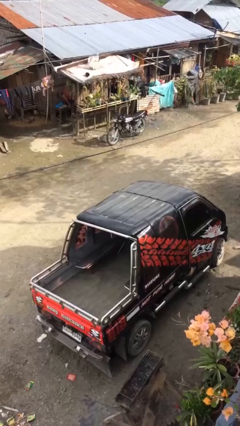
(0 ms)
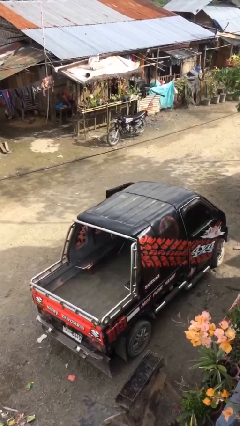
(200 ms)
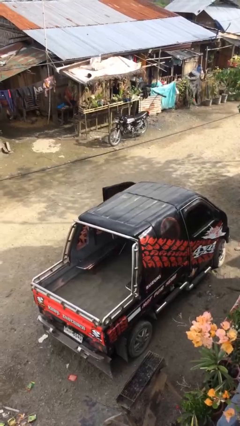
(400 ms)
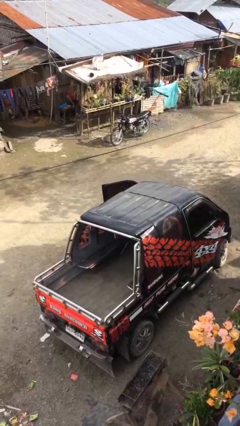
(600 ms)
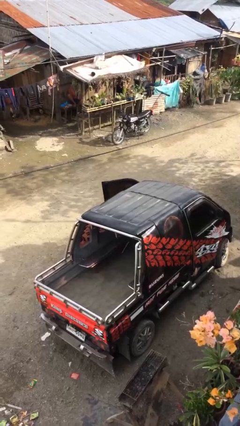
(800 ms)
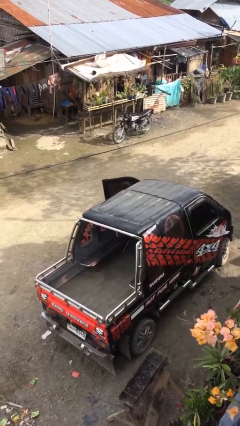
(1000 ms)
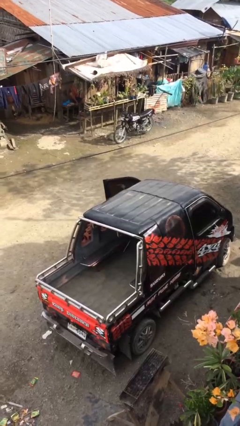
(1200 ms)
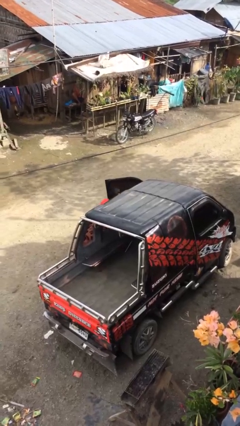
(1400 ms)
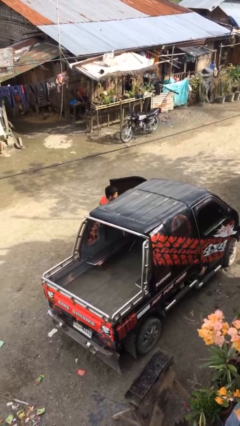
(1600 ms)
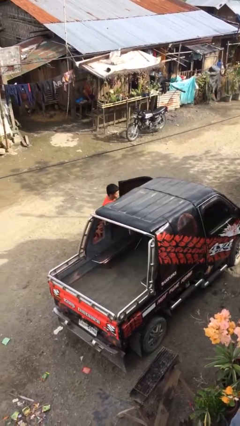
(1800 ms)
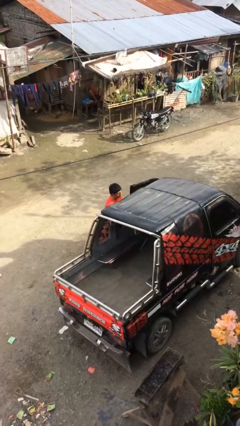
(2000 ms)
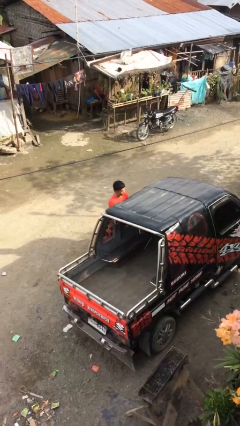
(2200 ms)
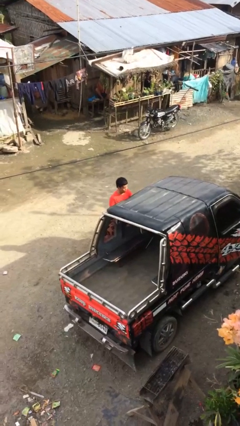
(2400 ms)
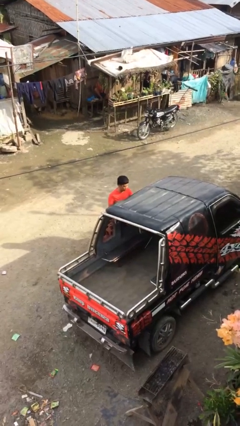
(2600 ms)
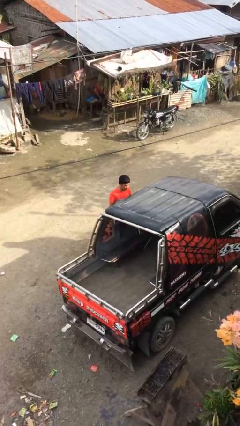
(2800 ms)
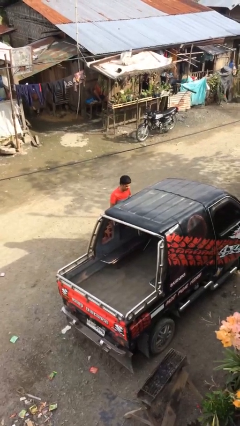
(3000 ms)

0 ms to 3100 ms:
person exits car

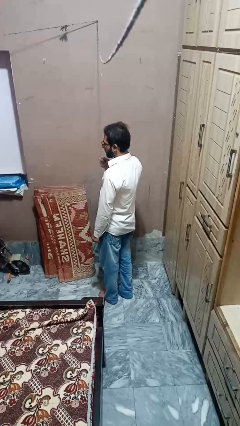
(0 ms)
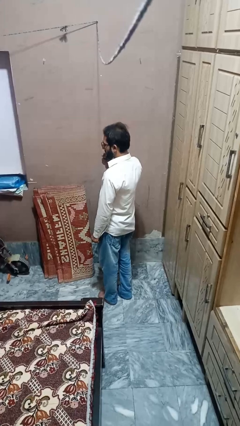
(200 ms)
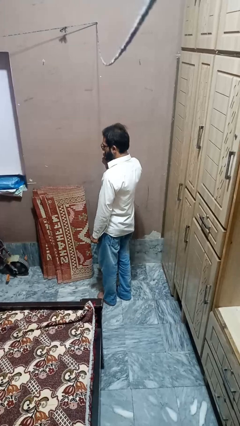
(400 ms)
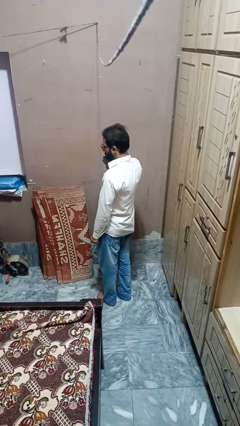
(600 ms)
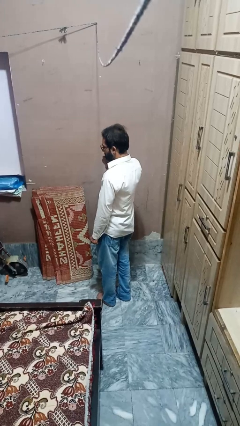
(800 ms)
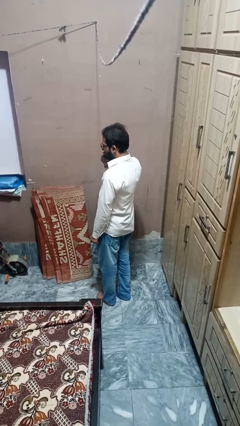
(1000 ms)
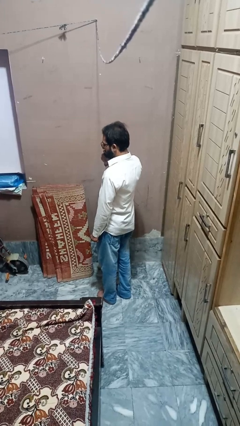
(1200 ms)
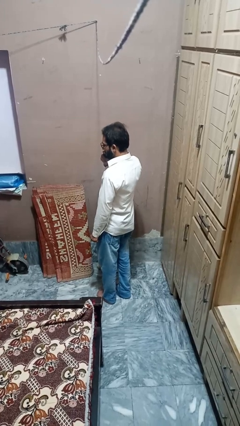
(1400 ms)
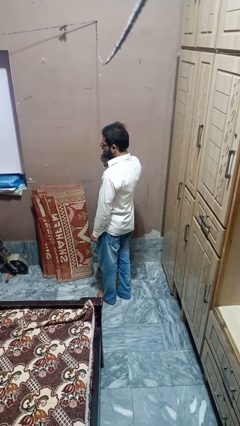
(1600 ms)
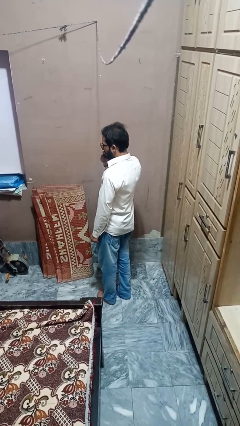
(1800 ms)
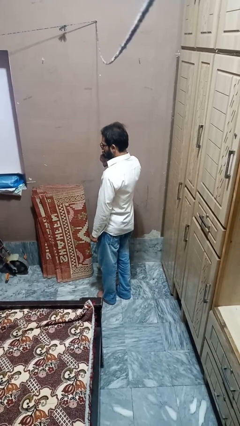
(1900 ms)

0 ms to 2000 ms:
person flosses

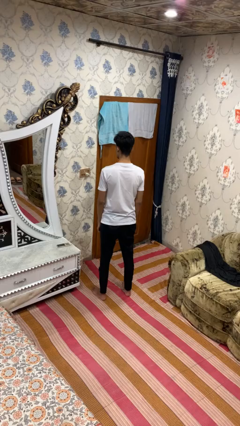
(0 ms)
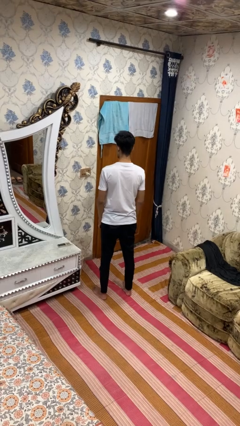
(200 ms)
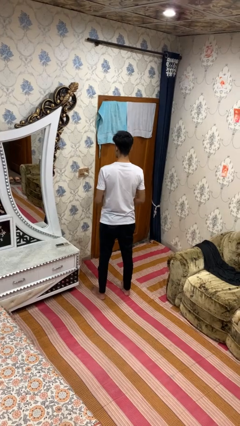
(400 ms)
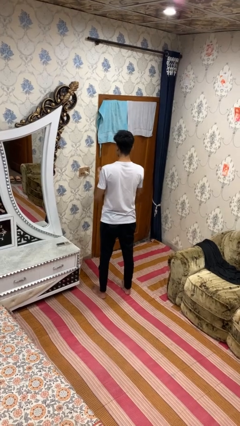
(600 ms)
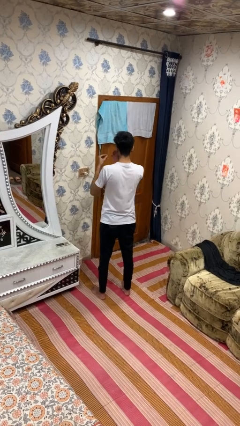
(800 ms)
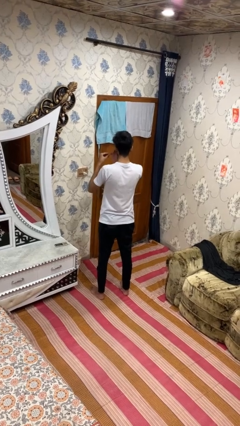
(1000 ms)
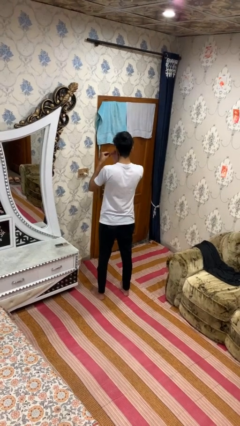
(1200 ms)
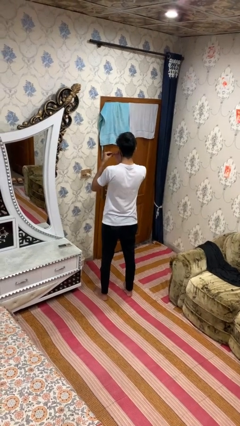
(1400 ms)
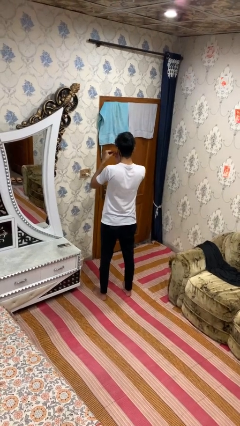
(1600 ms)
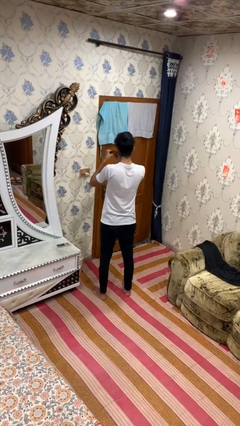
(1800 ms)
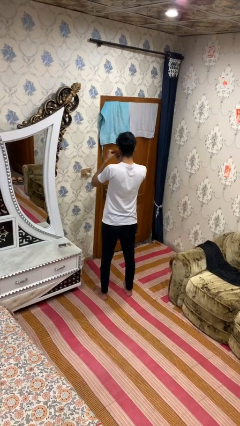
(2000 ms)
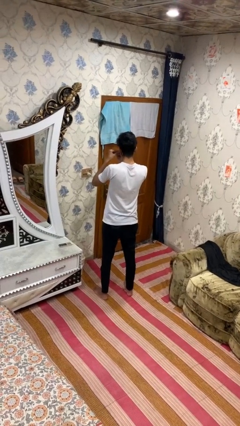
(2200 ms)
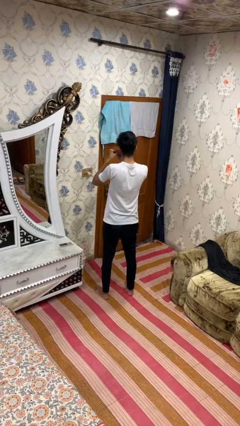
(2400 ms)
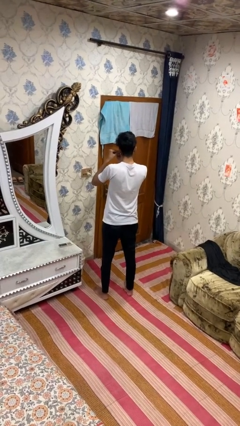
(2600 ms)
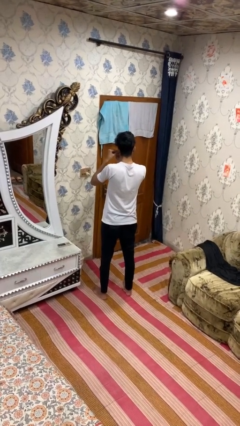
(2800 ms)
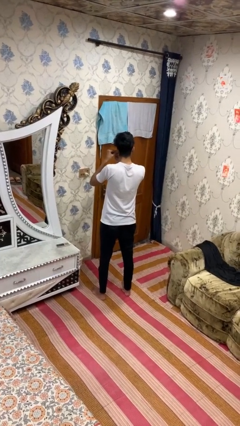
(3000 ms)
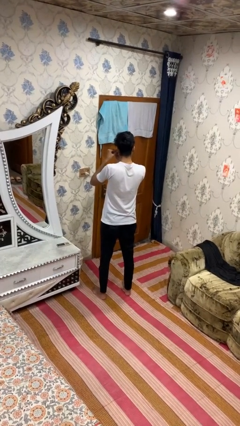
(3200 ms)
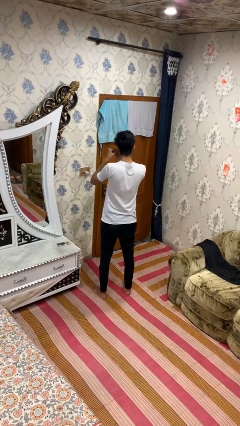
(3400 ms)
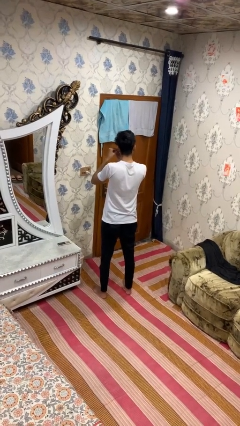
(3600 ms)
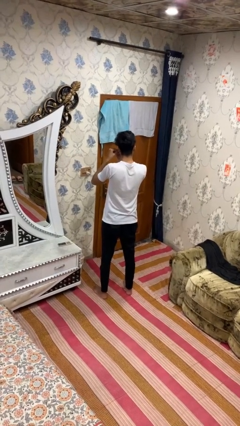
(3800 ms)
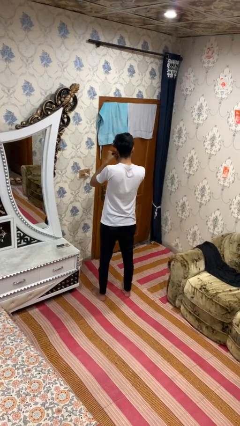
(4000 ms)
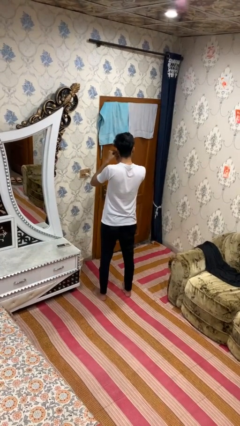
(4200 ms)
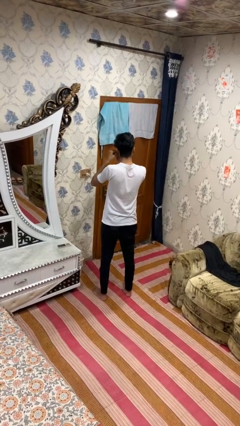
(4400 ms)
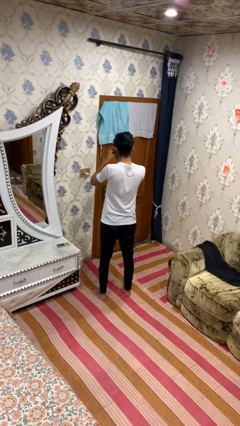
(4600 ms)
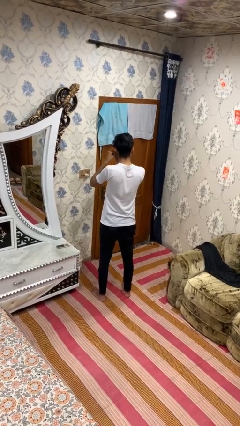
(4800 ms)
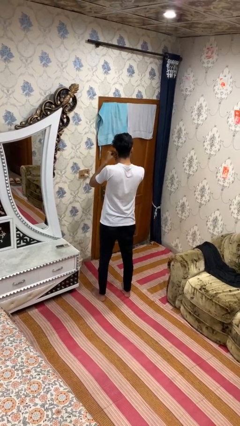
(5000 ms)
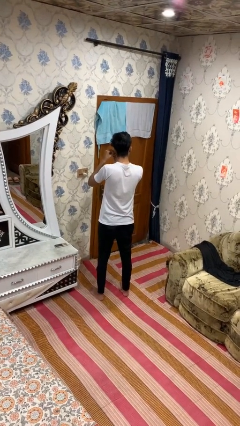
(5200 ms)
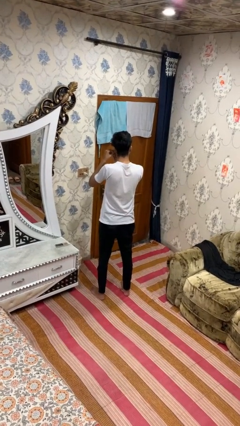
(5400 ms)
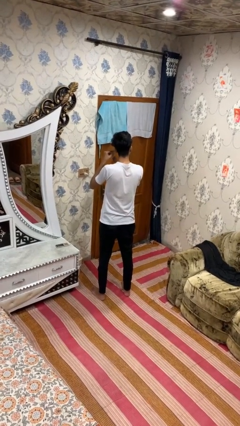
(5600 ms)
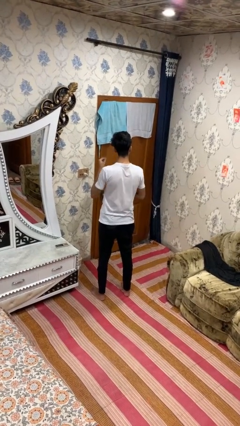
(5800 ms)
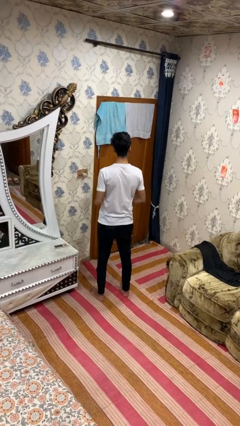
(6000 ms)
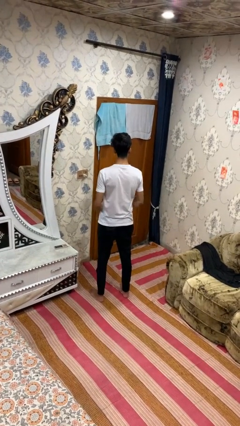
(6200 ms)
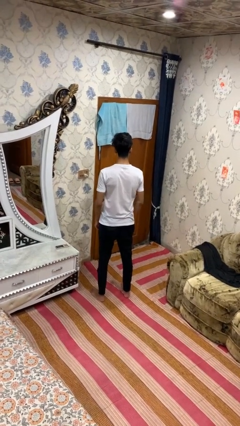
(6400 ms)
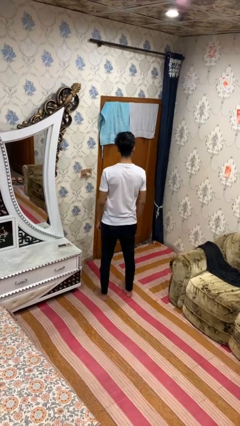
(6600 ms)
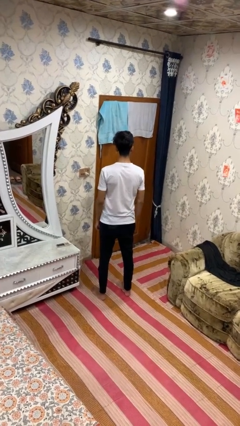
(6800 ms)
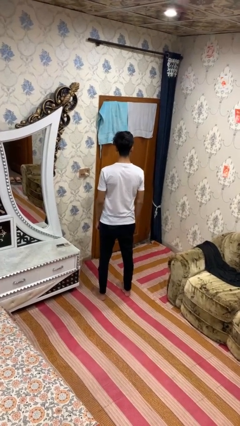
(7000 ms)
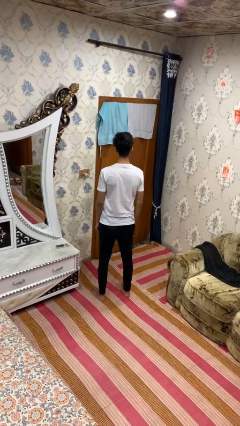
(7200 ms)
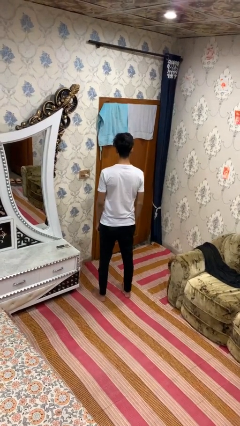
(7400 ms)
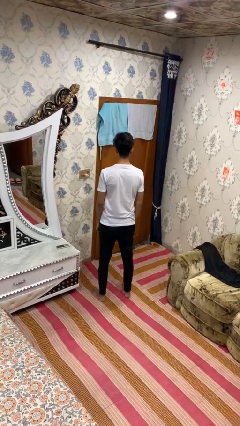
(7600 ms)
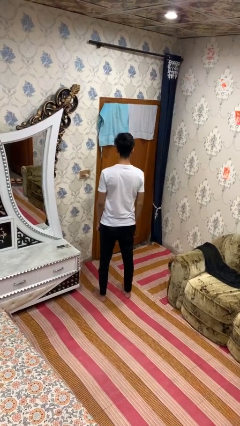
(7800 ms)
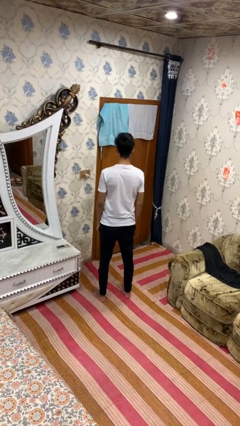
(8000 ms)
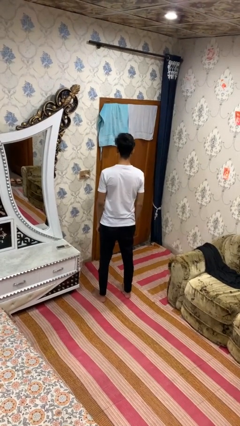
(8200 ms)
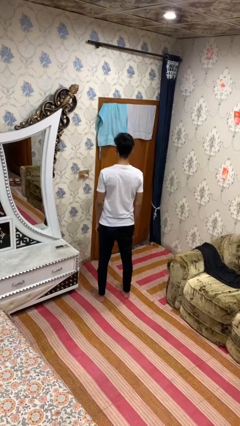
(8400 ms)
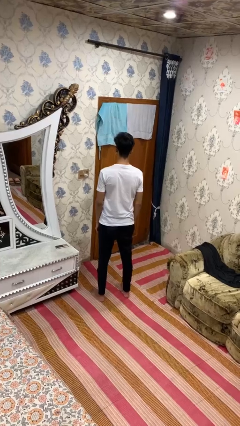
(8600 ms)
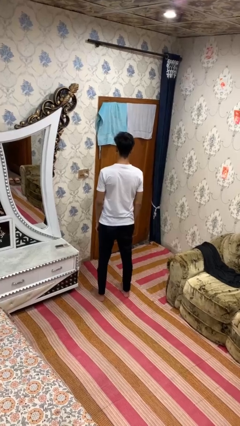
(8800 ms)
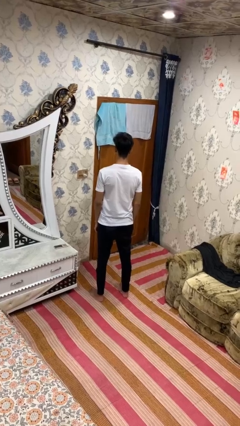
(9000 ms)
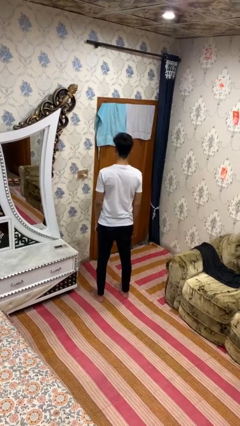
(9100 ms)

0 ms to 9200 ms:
person puts on earrings

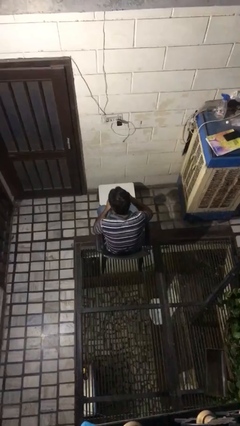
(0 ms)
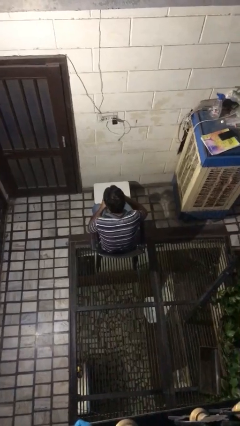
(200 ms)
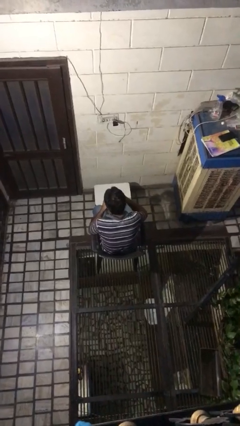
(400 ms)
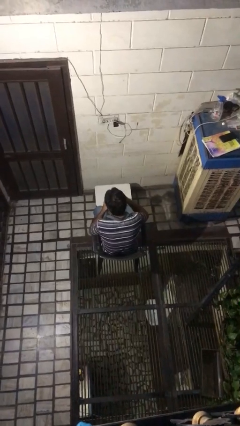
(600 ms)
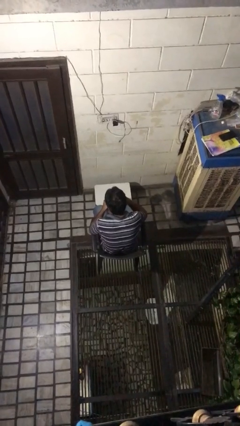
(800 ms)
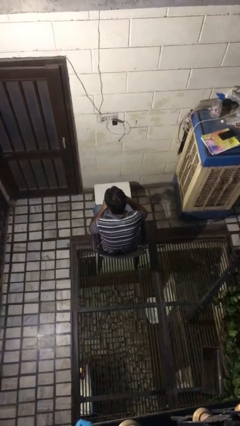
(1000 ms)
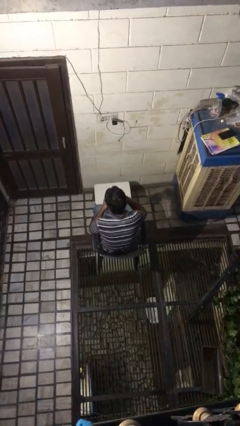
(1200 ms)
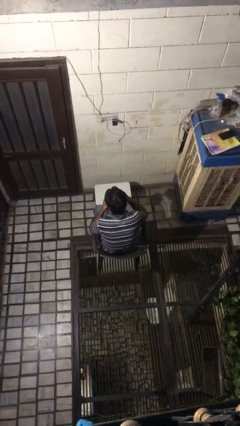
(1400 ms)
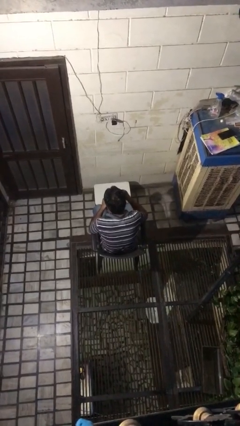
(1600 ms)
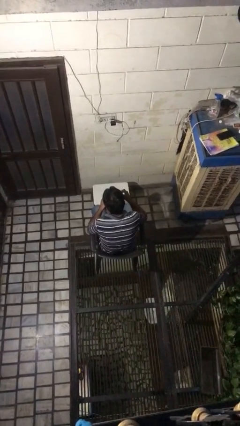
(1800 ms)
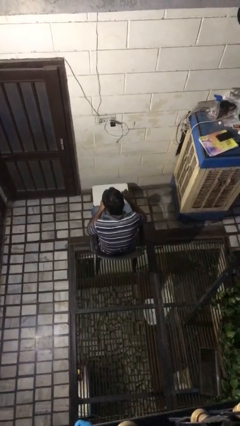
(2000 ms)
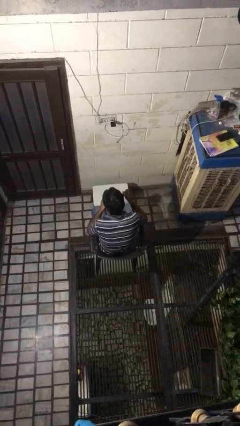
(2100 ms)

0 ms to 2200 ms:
person stirs mug

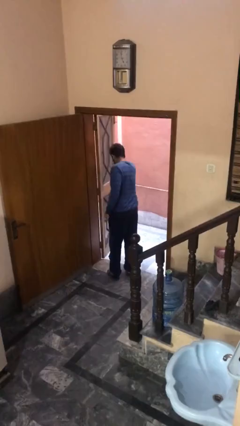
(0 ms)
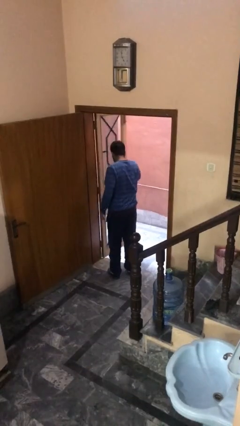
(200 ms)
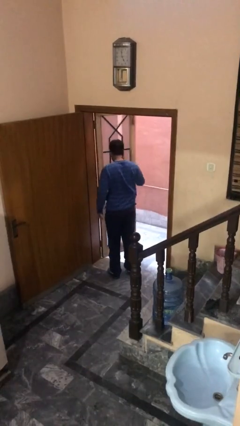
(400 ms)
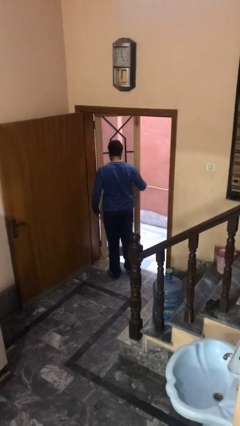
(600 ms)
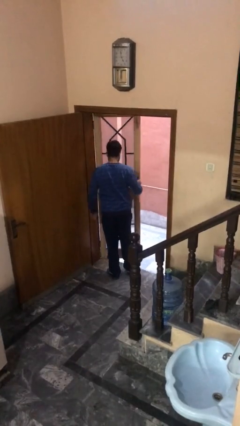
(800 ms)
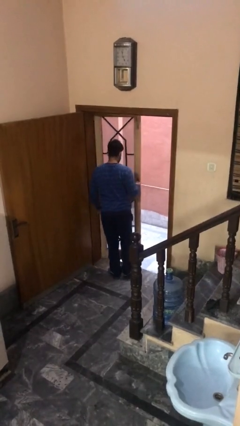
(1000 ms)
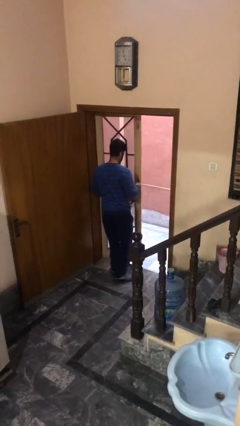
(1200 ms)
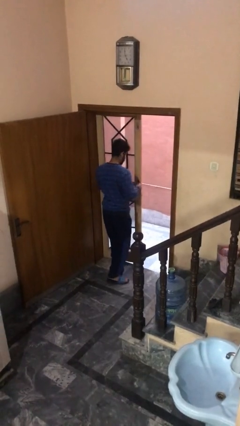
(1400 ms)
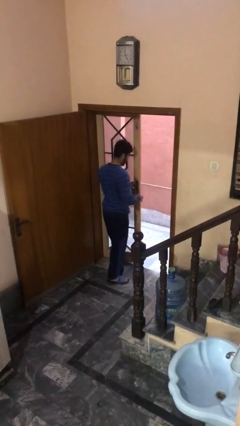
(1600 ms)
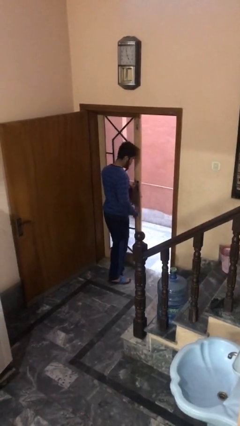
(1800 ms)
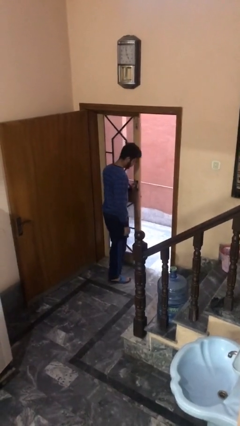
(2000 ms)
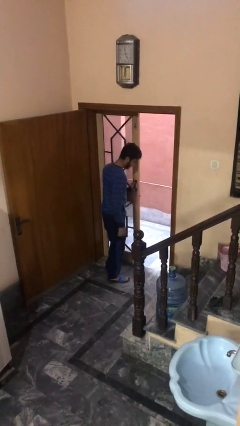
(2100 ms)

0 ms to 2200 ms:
person closes facility door
